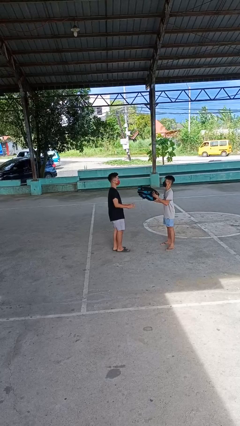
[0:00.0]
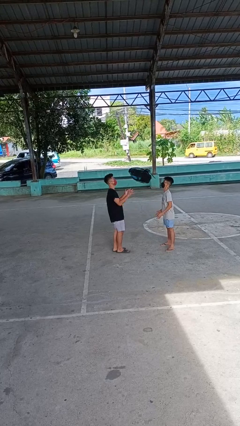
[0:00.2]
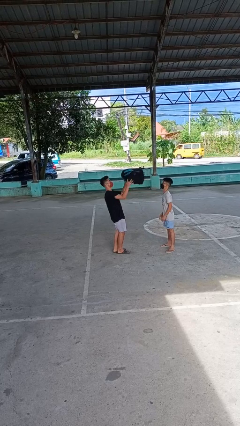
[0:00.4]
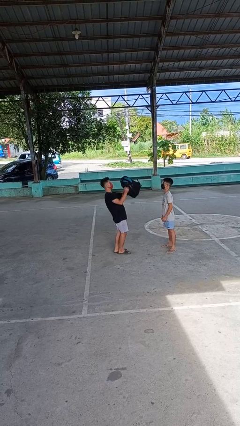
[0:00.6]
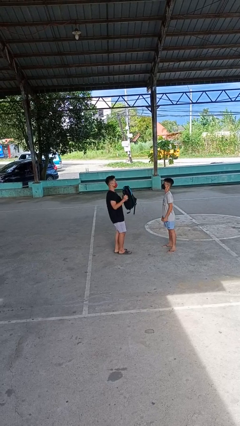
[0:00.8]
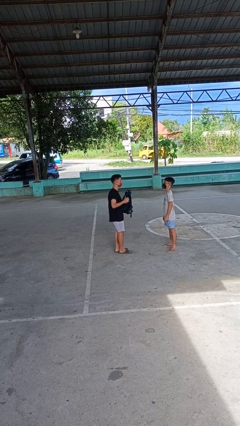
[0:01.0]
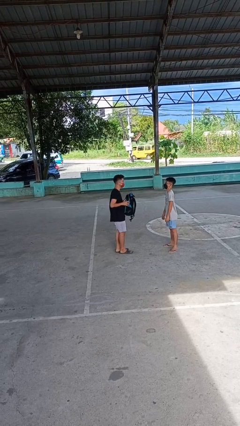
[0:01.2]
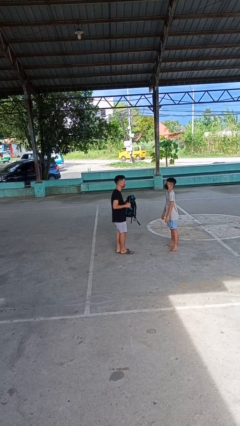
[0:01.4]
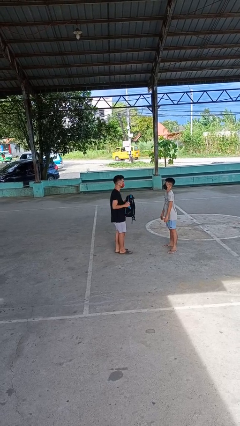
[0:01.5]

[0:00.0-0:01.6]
person catches object from person

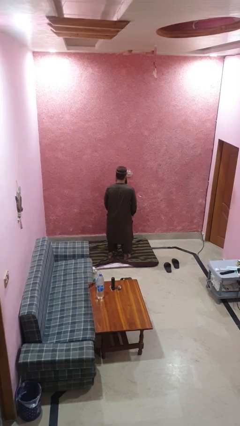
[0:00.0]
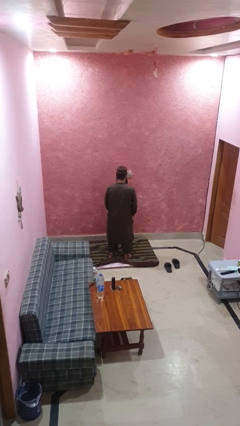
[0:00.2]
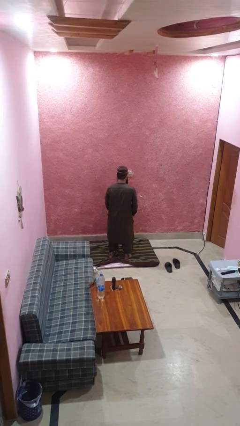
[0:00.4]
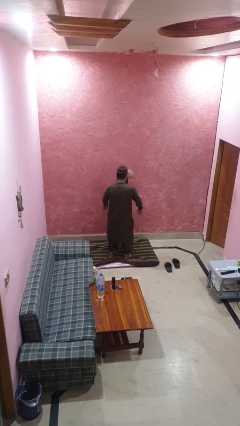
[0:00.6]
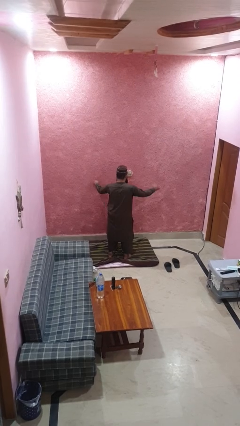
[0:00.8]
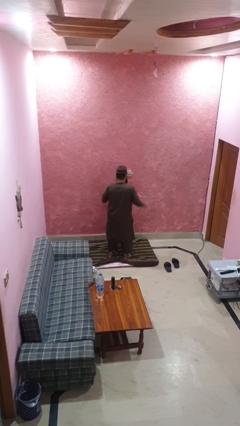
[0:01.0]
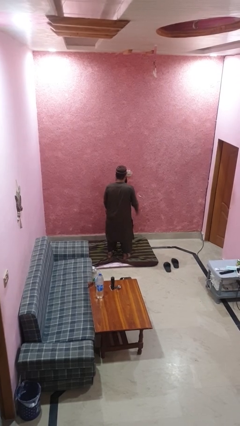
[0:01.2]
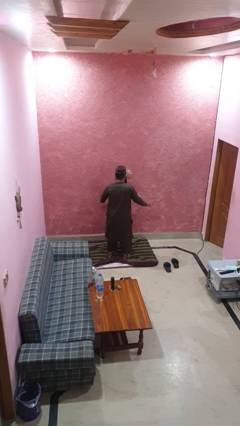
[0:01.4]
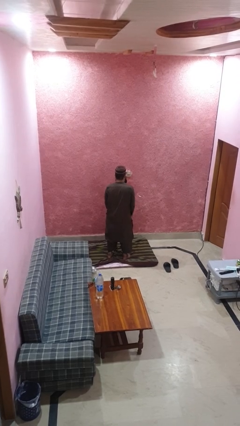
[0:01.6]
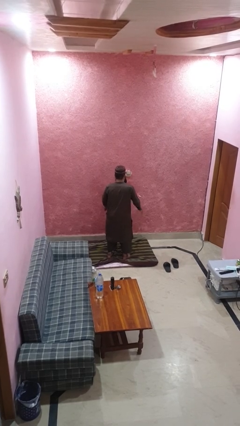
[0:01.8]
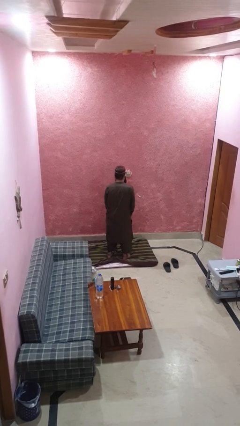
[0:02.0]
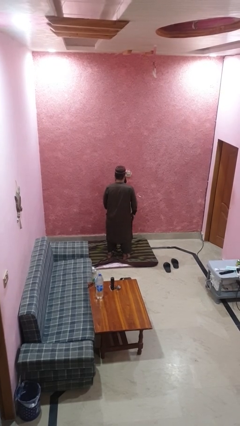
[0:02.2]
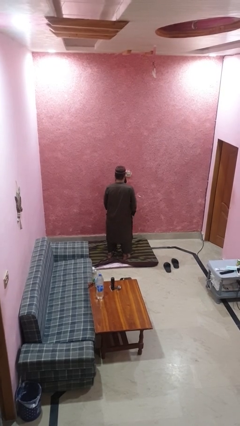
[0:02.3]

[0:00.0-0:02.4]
person slaps hands on thighs

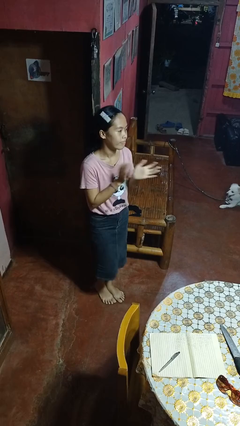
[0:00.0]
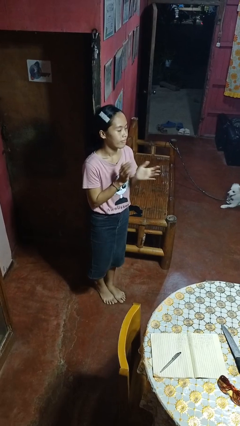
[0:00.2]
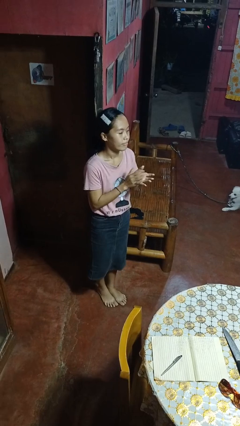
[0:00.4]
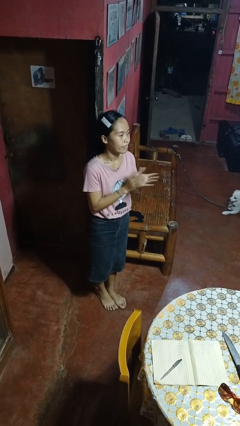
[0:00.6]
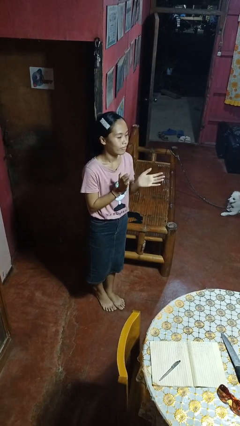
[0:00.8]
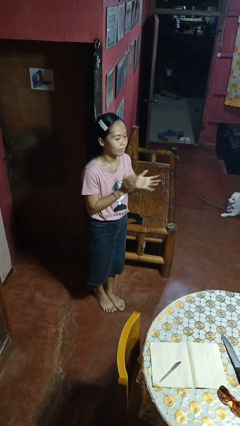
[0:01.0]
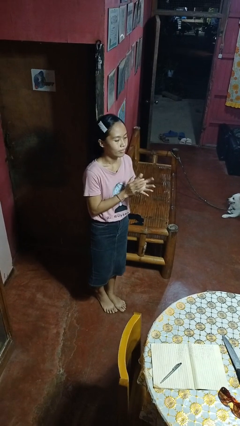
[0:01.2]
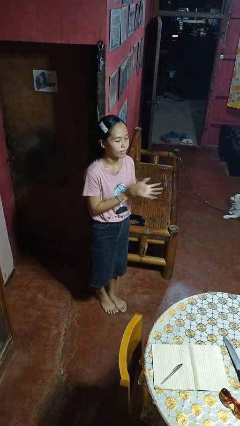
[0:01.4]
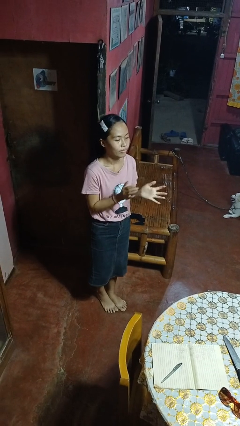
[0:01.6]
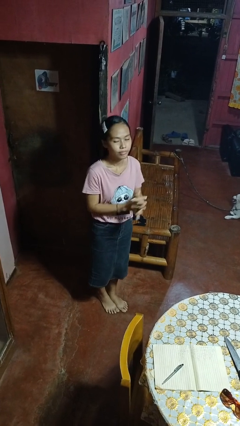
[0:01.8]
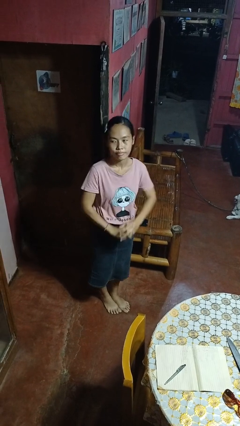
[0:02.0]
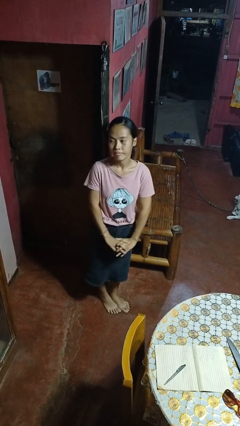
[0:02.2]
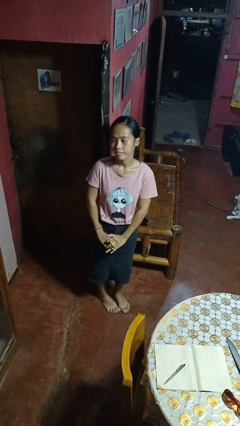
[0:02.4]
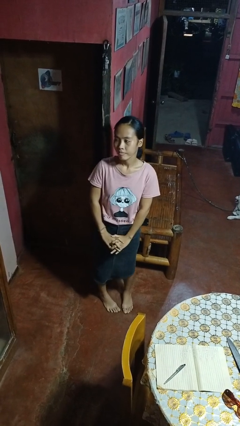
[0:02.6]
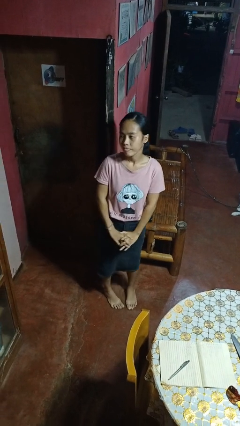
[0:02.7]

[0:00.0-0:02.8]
person claps hands

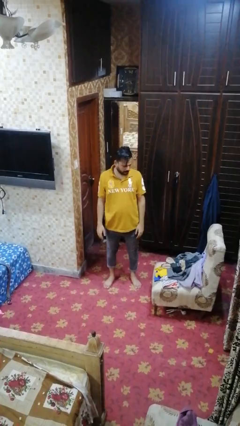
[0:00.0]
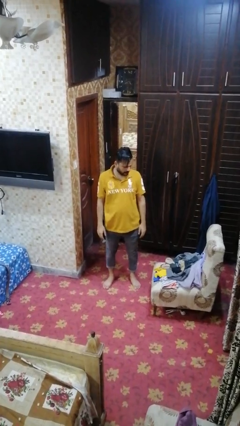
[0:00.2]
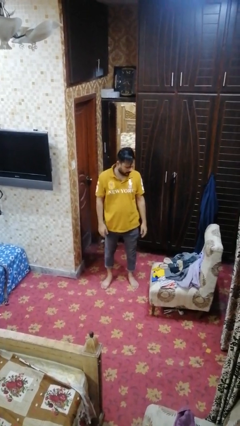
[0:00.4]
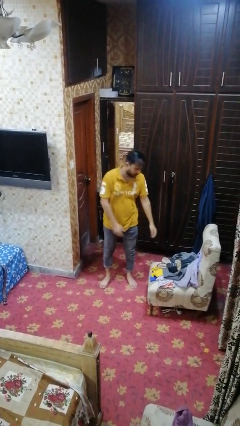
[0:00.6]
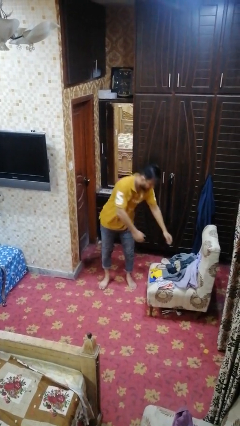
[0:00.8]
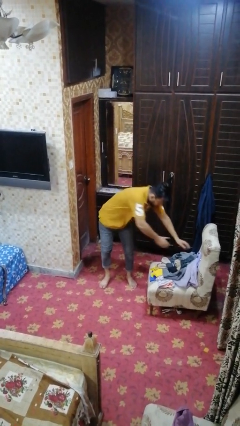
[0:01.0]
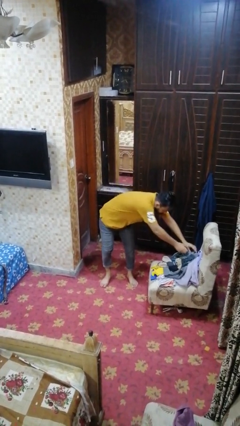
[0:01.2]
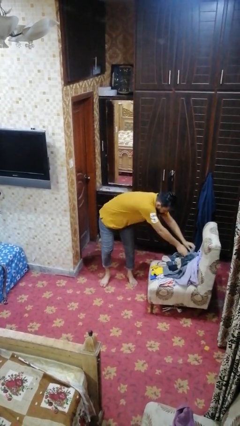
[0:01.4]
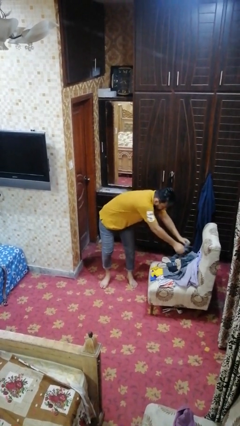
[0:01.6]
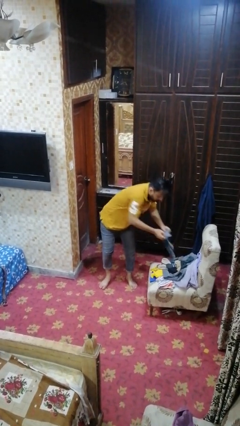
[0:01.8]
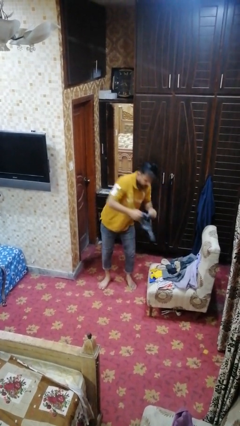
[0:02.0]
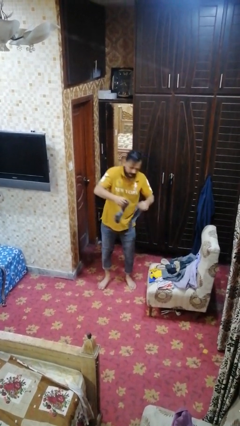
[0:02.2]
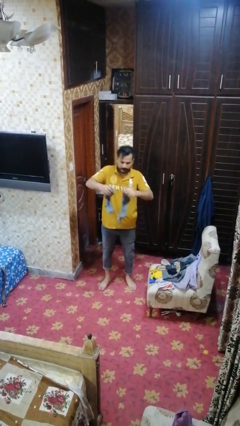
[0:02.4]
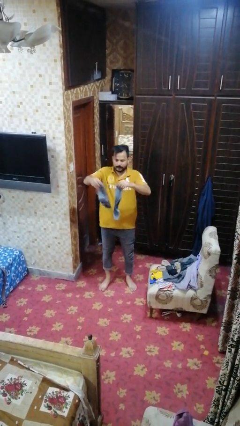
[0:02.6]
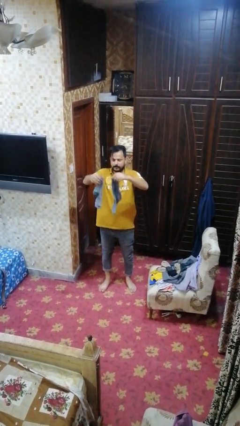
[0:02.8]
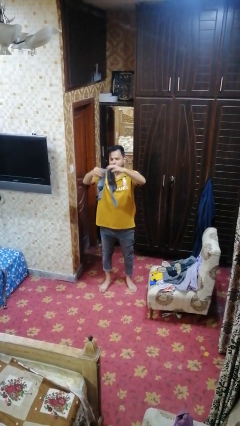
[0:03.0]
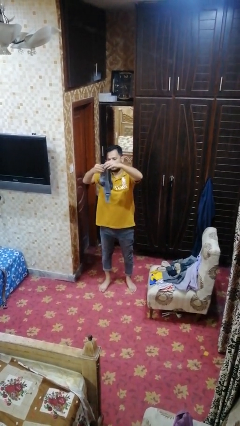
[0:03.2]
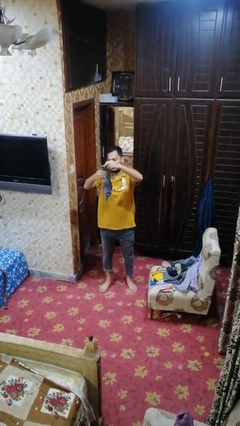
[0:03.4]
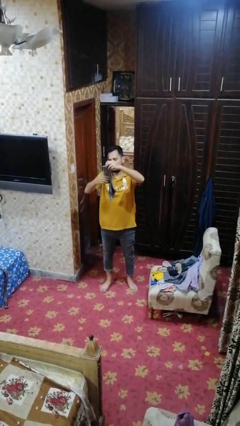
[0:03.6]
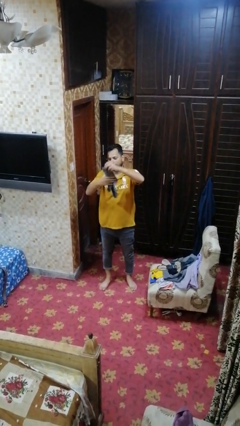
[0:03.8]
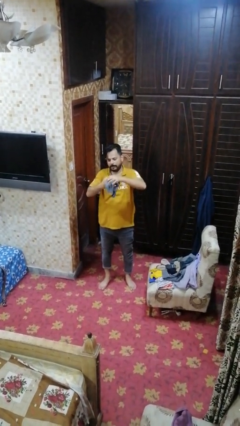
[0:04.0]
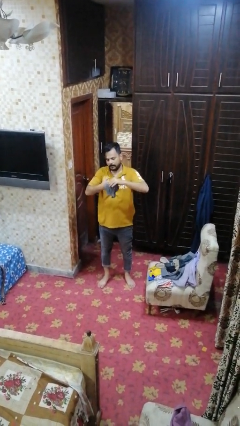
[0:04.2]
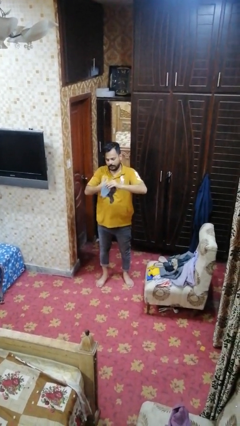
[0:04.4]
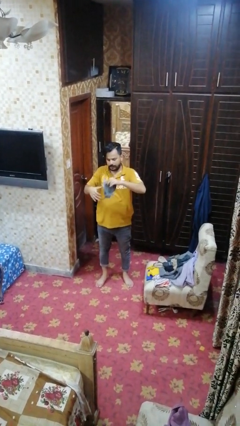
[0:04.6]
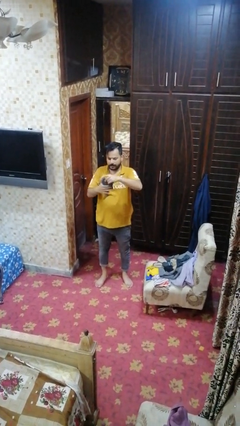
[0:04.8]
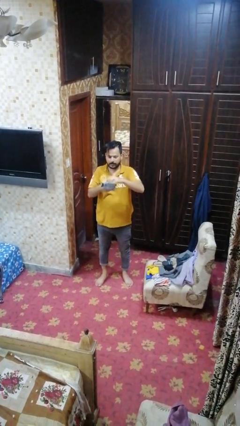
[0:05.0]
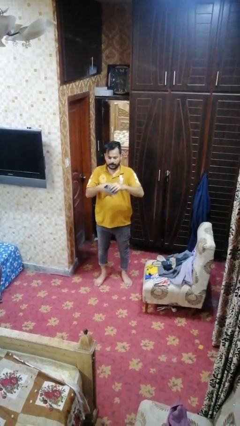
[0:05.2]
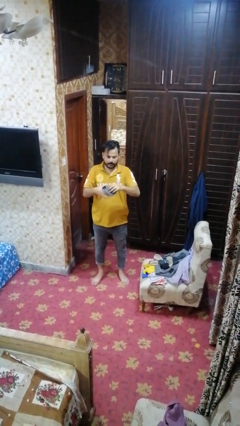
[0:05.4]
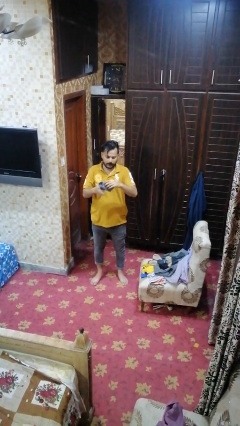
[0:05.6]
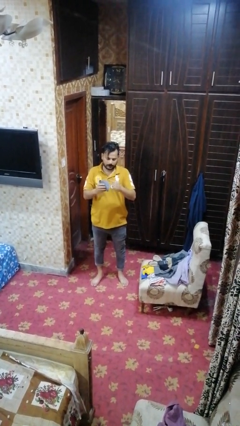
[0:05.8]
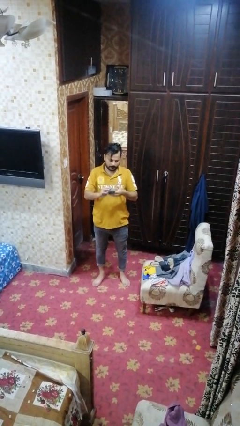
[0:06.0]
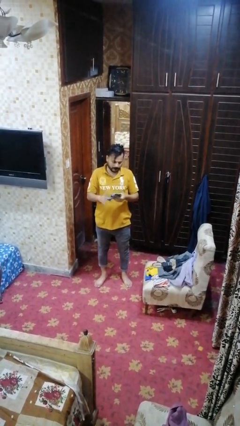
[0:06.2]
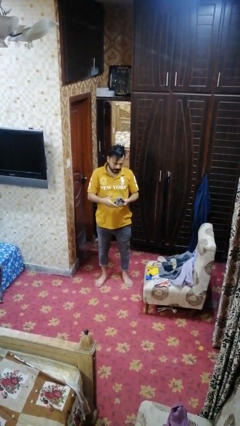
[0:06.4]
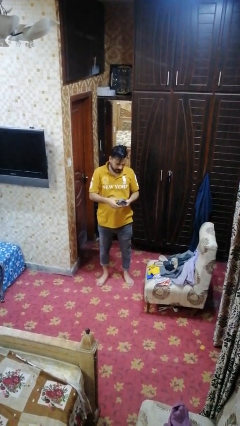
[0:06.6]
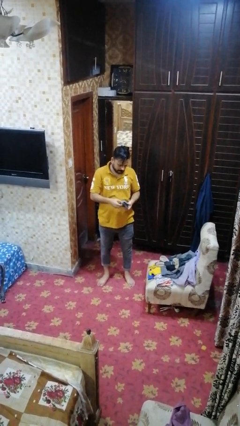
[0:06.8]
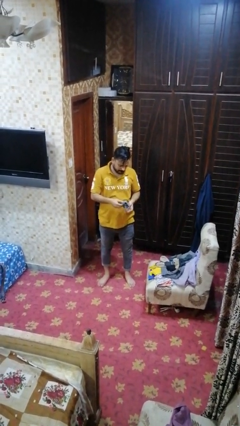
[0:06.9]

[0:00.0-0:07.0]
person folds socks

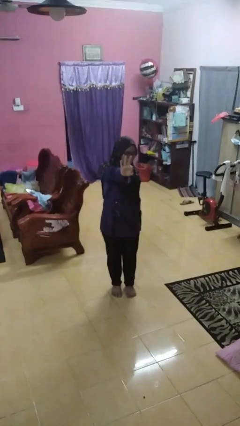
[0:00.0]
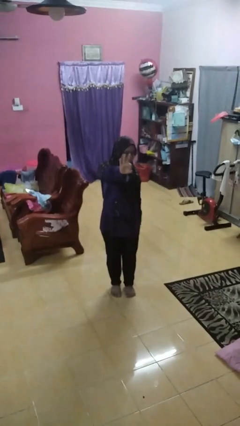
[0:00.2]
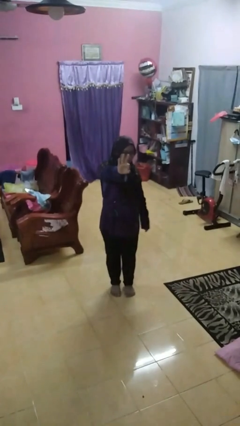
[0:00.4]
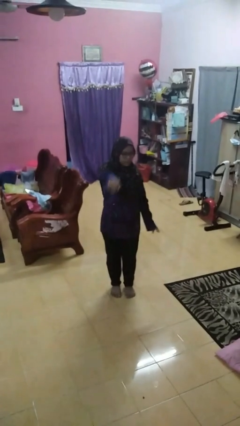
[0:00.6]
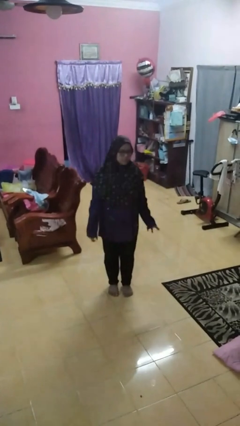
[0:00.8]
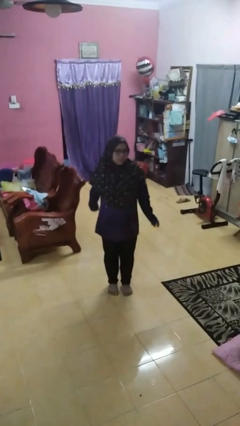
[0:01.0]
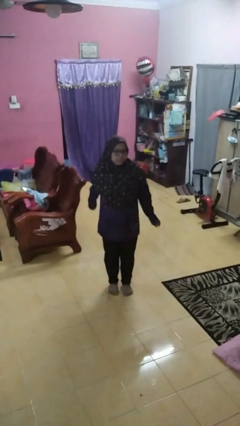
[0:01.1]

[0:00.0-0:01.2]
person gestures number three

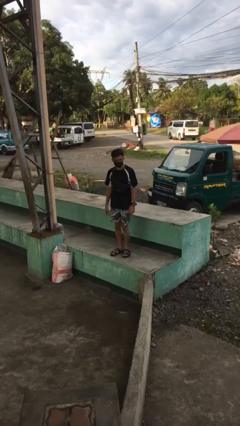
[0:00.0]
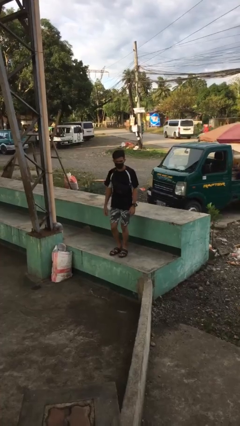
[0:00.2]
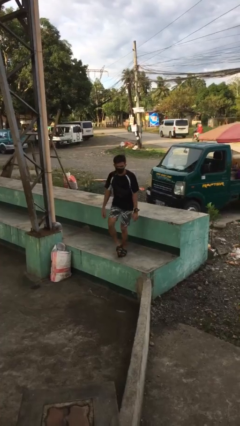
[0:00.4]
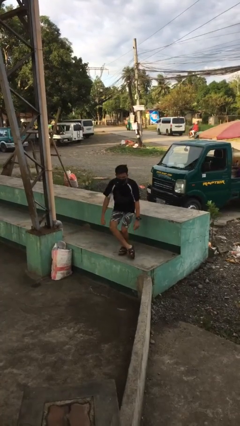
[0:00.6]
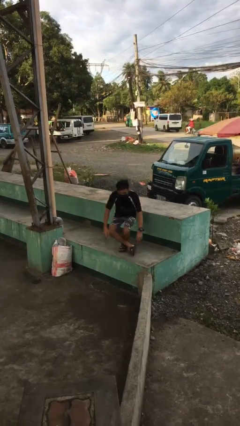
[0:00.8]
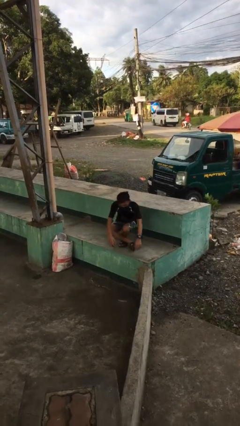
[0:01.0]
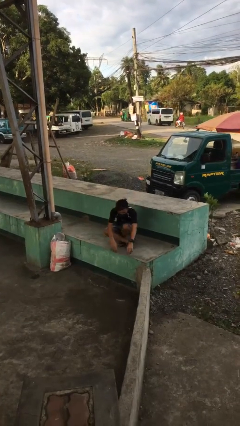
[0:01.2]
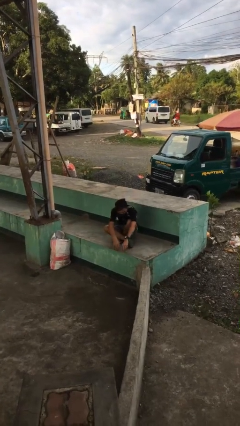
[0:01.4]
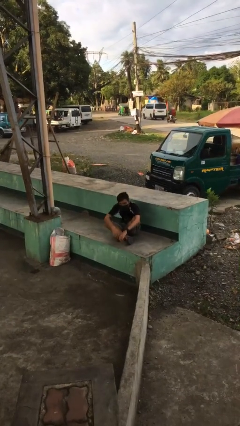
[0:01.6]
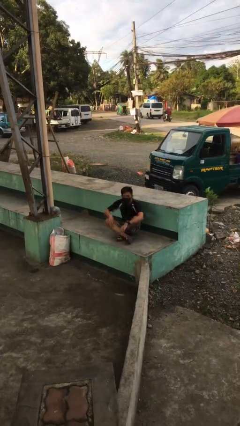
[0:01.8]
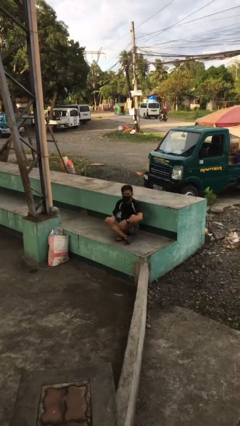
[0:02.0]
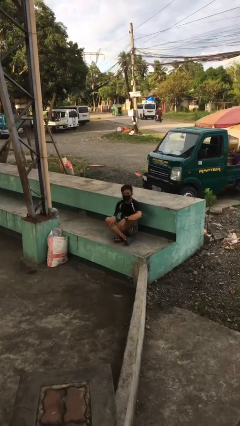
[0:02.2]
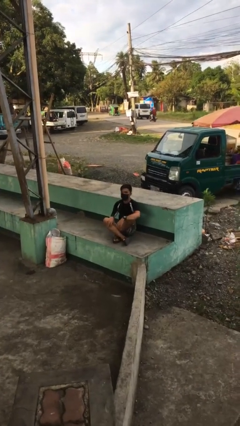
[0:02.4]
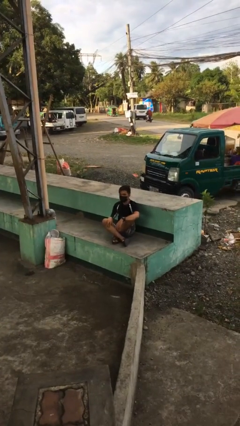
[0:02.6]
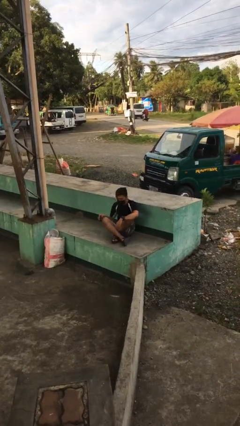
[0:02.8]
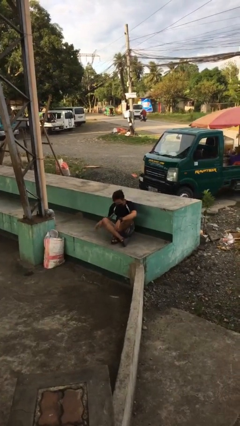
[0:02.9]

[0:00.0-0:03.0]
person sits crisscross
